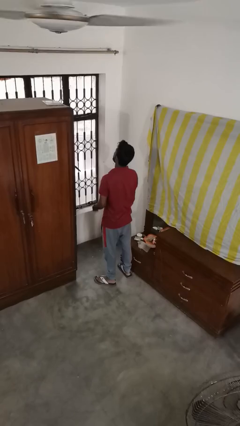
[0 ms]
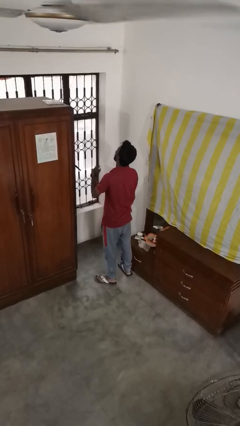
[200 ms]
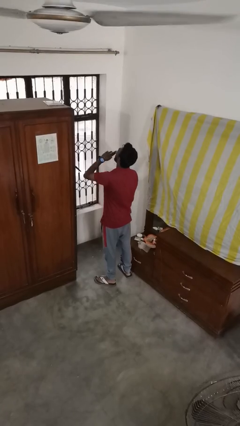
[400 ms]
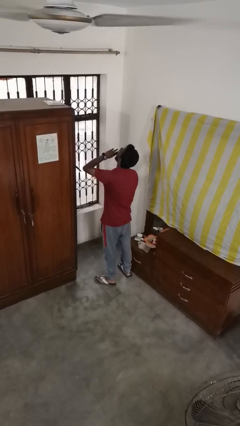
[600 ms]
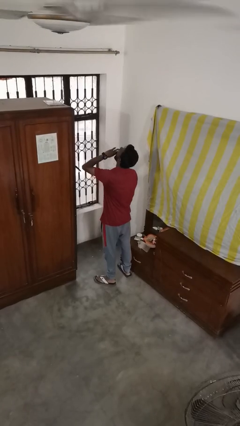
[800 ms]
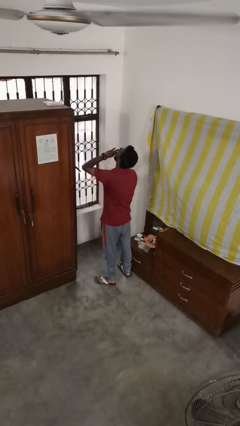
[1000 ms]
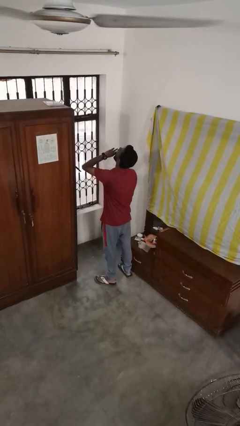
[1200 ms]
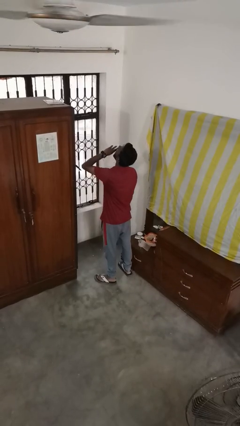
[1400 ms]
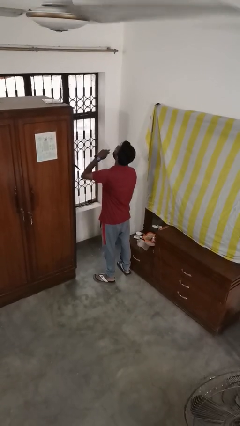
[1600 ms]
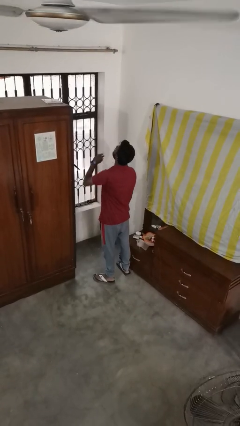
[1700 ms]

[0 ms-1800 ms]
person yawns

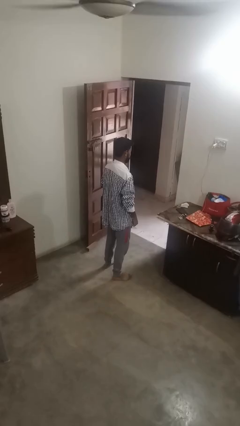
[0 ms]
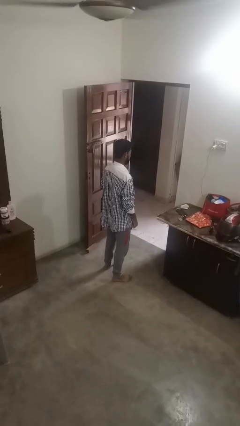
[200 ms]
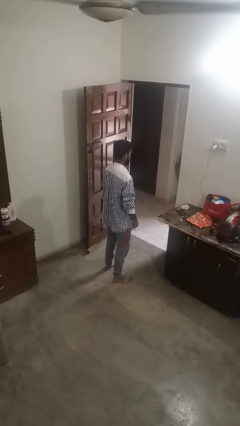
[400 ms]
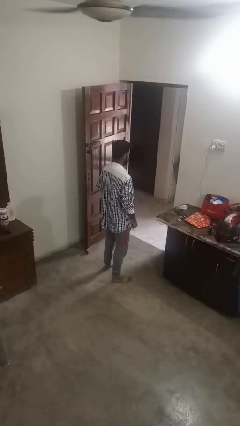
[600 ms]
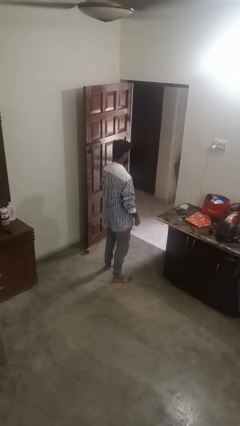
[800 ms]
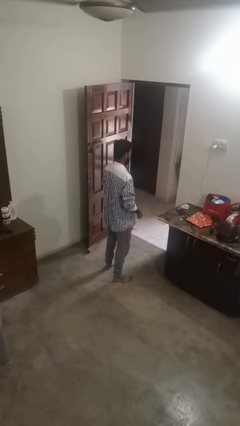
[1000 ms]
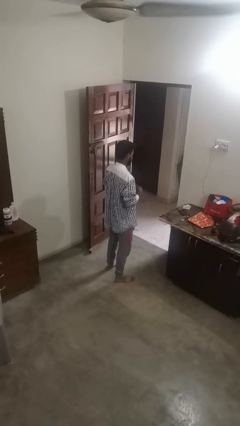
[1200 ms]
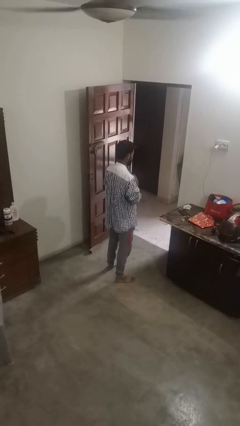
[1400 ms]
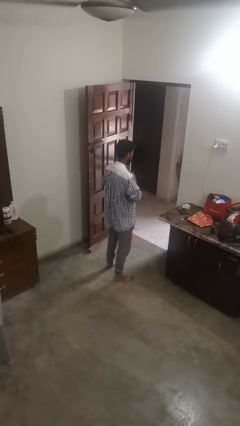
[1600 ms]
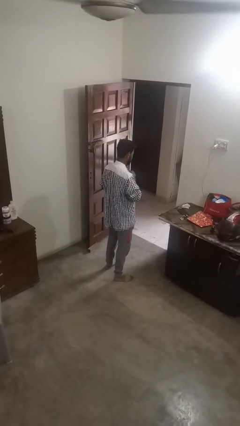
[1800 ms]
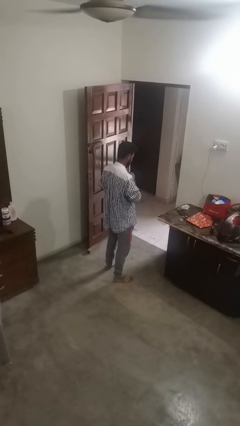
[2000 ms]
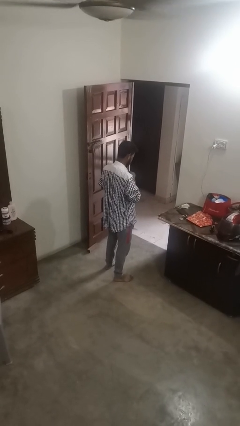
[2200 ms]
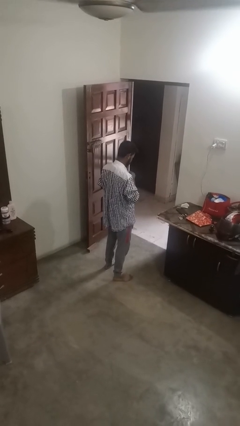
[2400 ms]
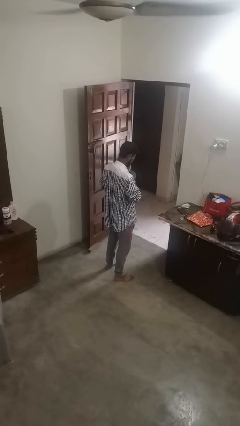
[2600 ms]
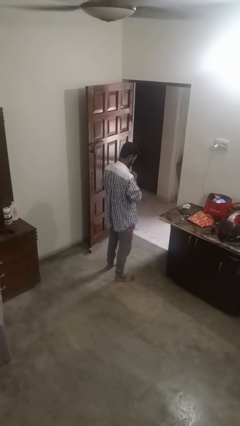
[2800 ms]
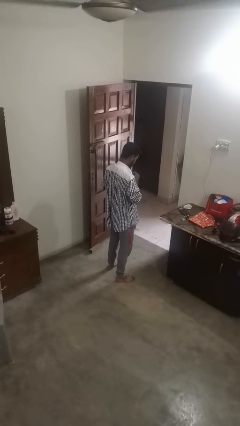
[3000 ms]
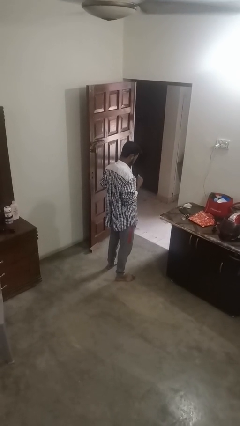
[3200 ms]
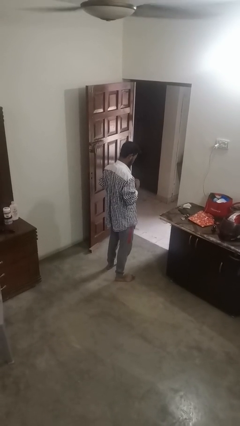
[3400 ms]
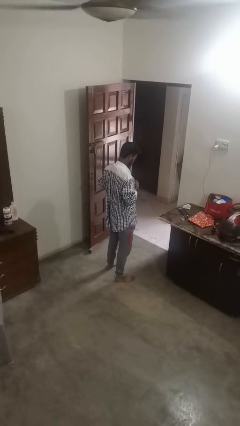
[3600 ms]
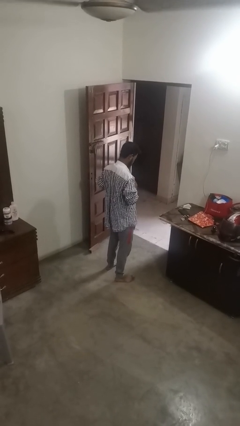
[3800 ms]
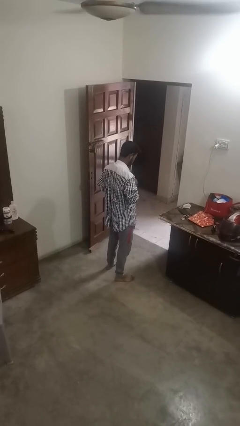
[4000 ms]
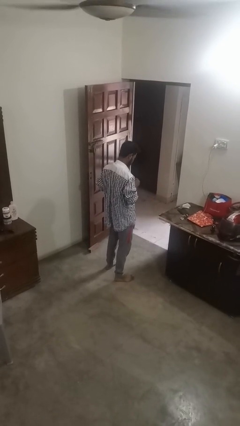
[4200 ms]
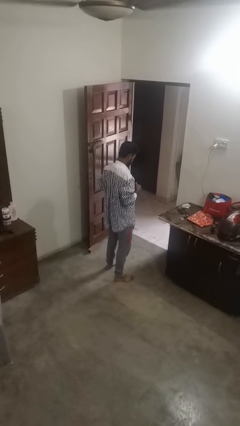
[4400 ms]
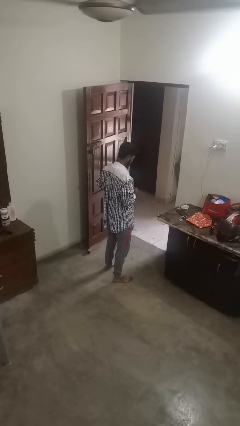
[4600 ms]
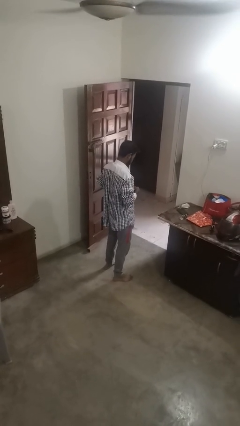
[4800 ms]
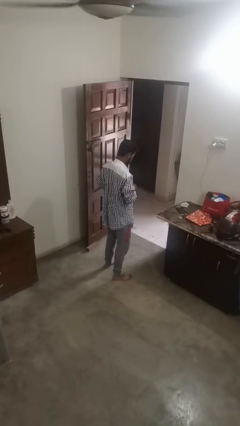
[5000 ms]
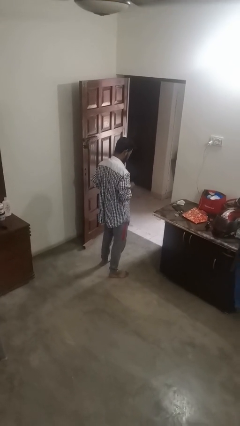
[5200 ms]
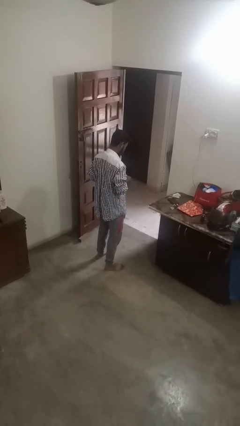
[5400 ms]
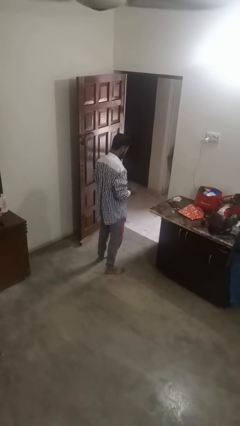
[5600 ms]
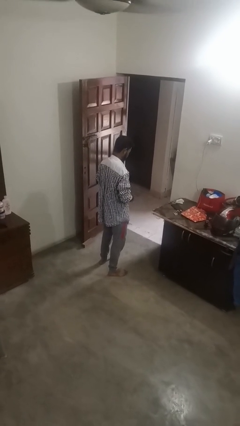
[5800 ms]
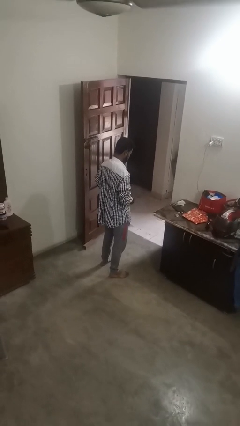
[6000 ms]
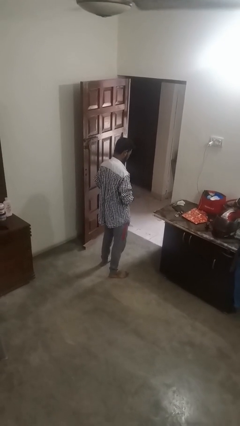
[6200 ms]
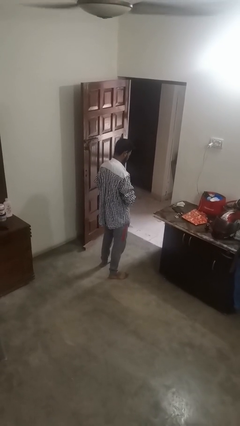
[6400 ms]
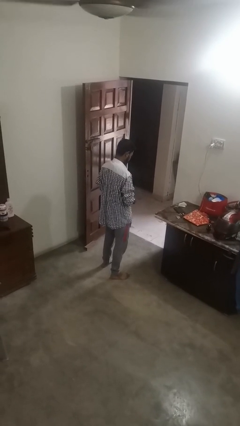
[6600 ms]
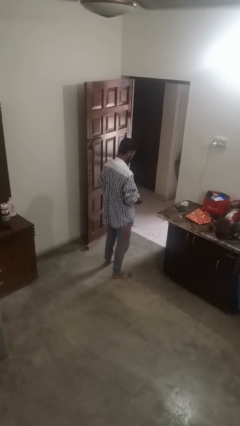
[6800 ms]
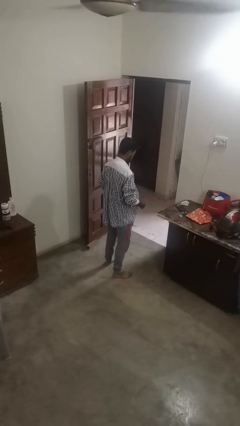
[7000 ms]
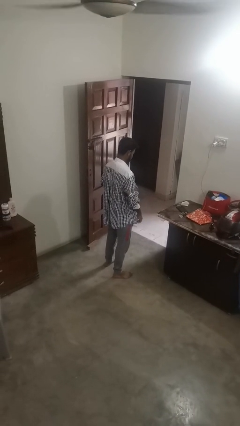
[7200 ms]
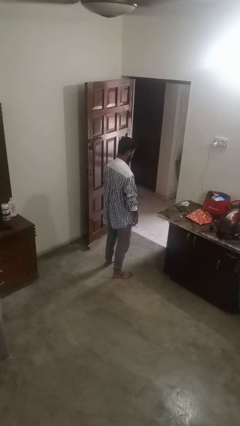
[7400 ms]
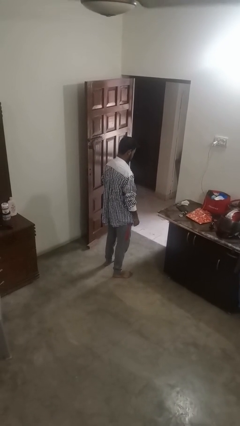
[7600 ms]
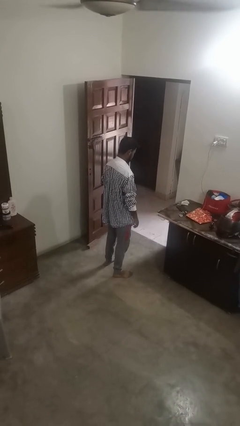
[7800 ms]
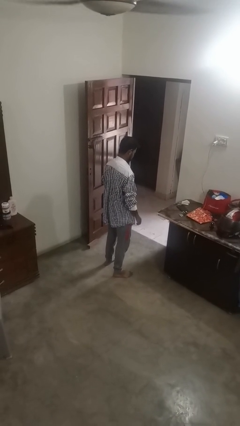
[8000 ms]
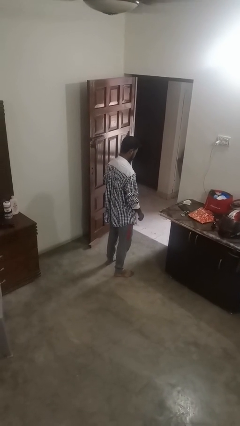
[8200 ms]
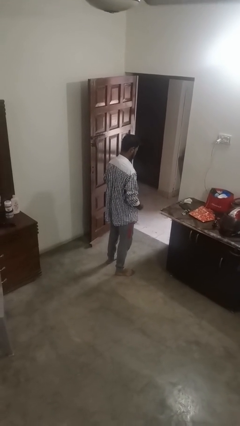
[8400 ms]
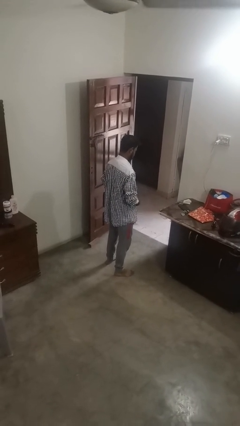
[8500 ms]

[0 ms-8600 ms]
person unbuttons shirt

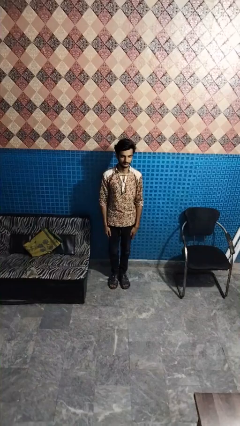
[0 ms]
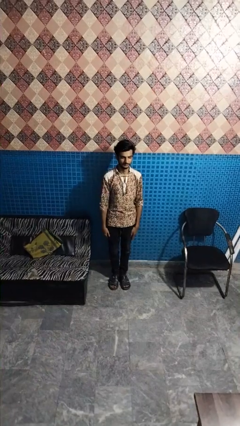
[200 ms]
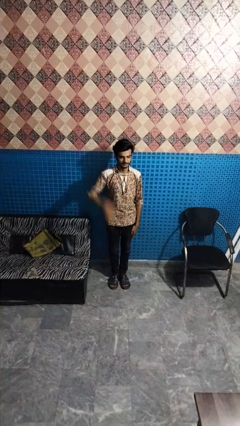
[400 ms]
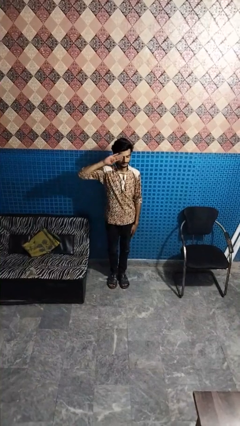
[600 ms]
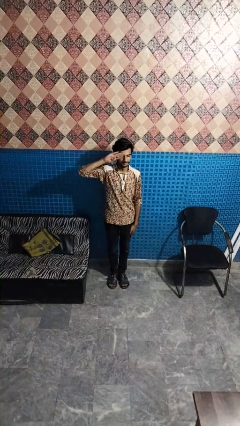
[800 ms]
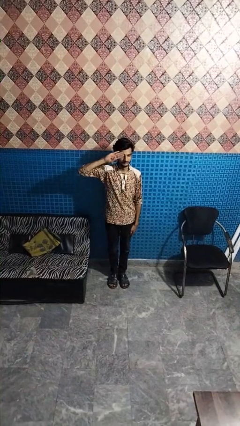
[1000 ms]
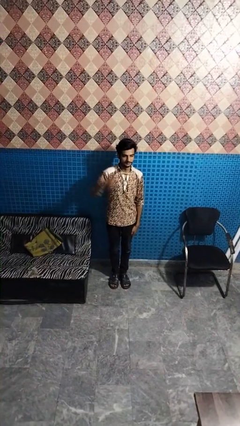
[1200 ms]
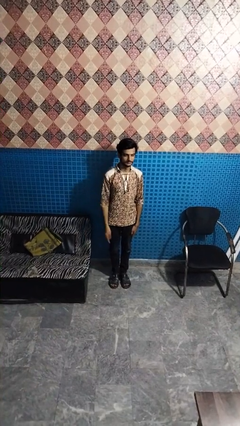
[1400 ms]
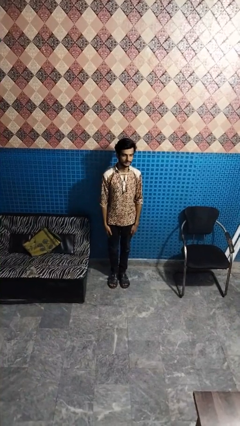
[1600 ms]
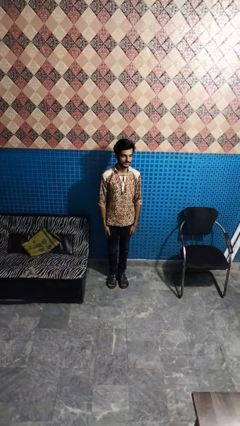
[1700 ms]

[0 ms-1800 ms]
person salutes

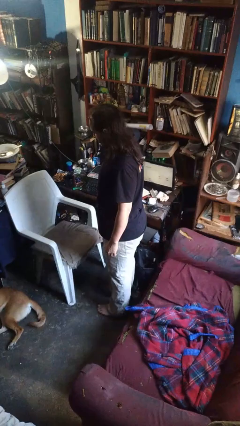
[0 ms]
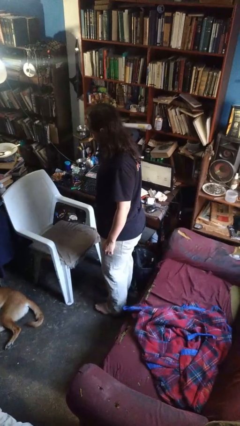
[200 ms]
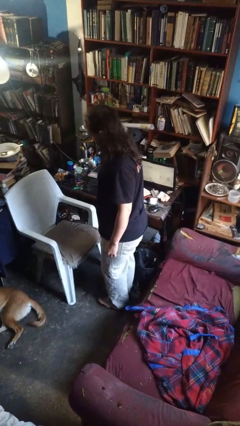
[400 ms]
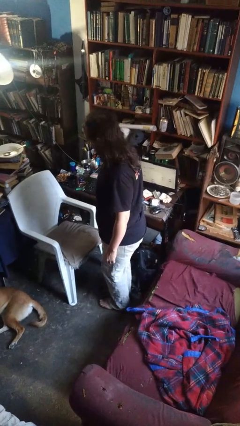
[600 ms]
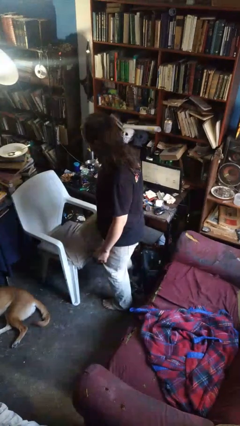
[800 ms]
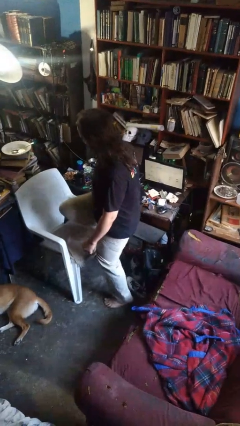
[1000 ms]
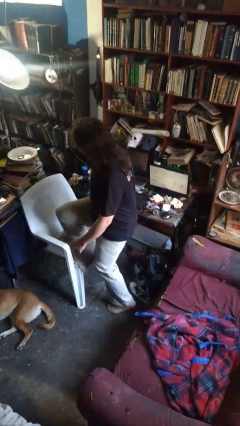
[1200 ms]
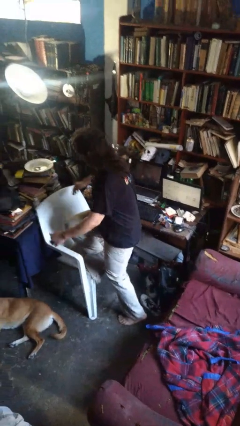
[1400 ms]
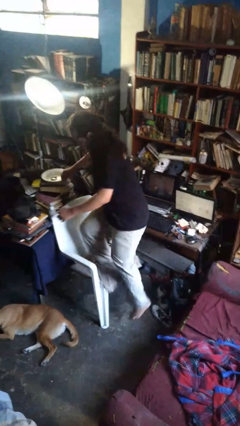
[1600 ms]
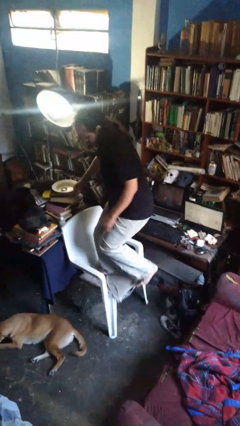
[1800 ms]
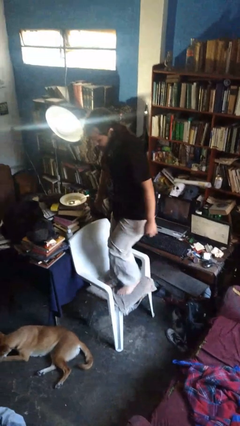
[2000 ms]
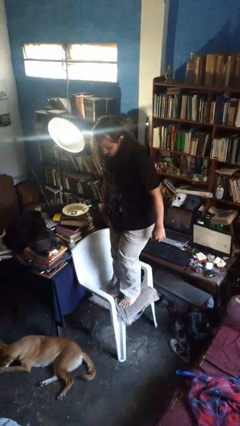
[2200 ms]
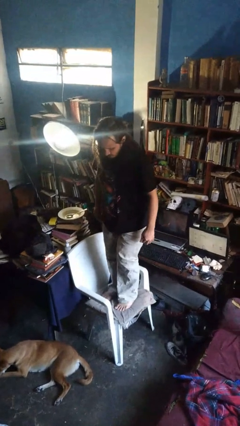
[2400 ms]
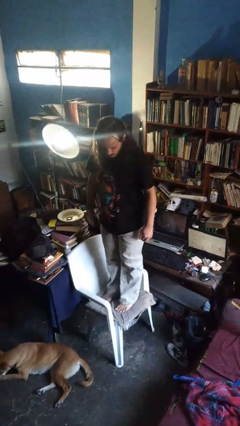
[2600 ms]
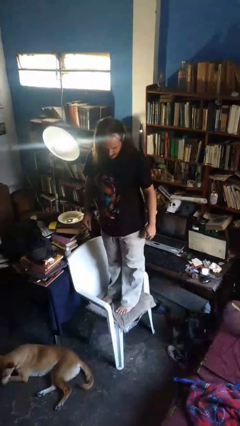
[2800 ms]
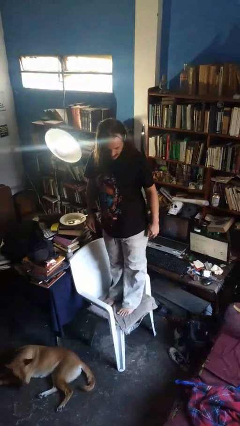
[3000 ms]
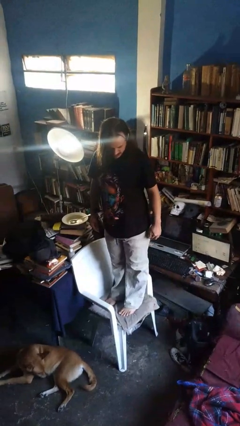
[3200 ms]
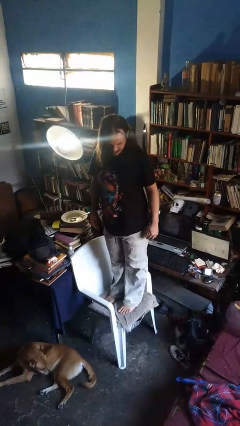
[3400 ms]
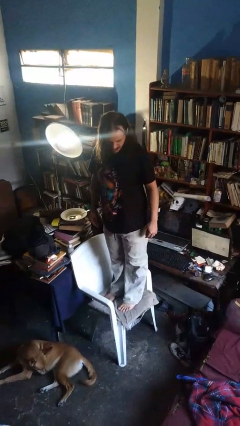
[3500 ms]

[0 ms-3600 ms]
person climbs on chair

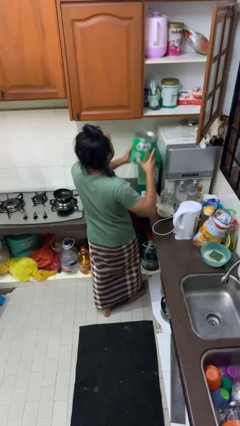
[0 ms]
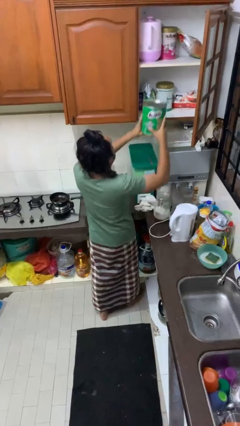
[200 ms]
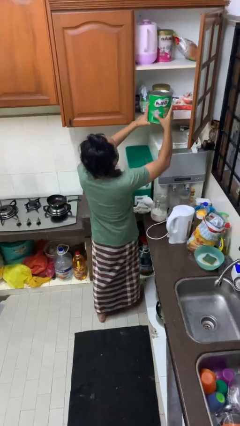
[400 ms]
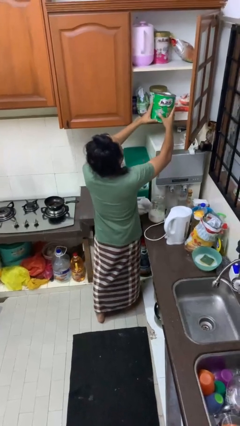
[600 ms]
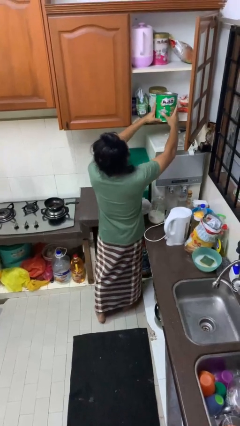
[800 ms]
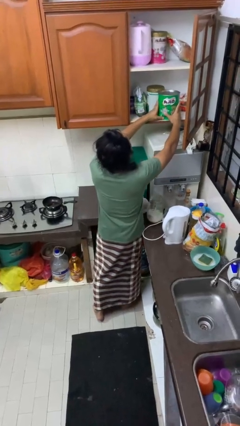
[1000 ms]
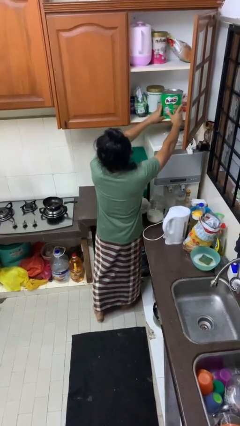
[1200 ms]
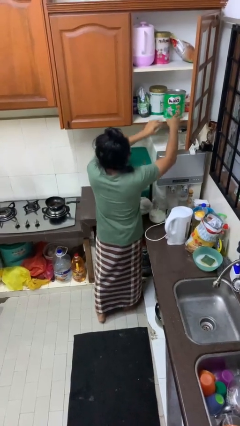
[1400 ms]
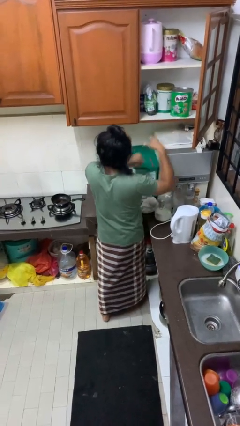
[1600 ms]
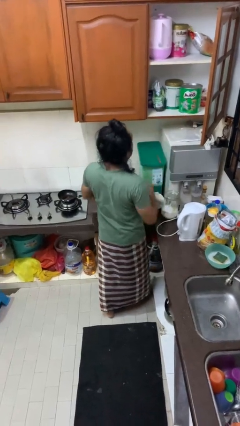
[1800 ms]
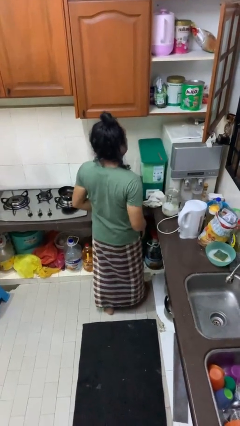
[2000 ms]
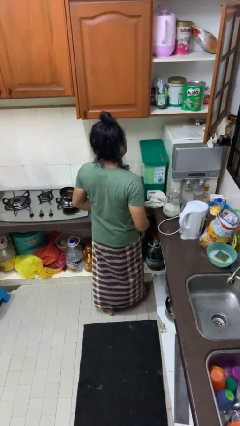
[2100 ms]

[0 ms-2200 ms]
person puts object in cabinet
